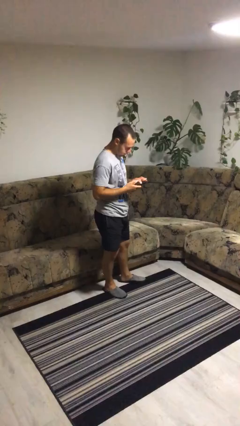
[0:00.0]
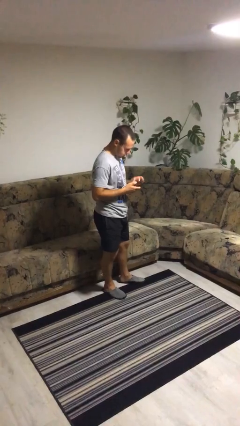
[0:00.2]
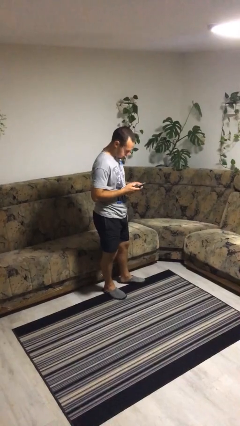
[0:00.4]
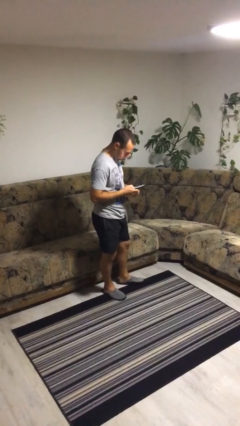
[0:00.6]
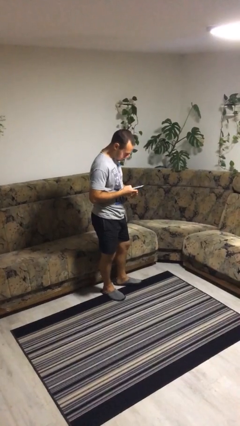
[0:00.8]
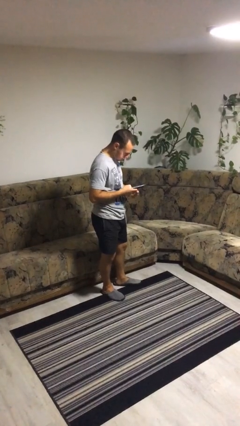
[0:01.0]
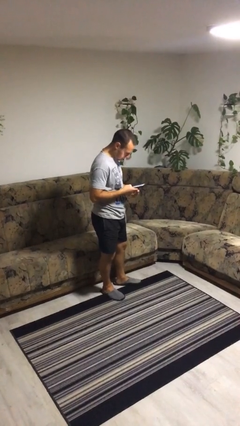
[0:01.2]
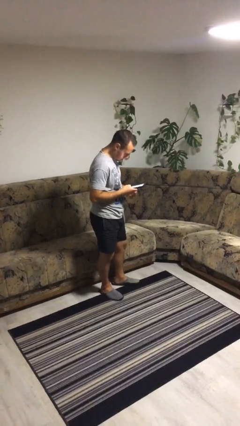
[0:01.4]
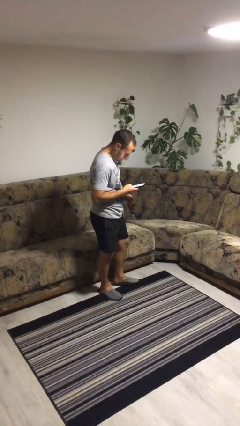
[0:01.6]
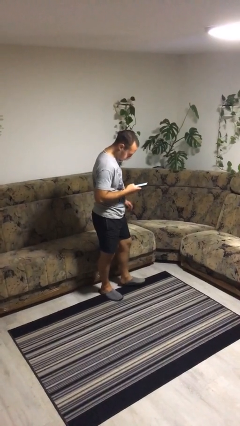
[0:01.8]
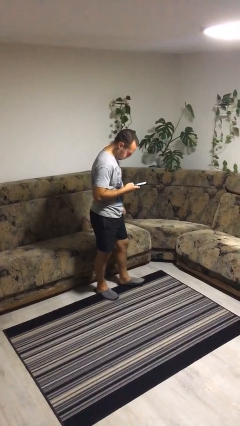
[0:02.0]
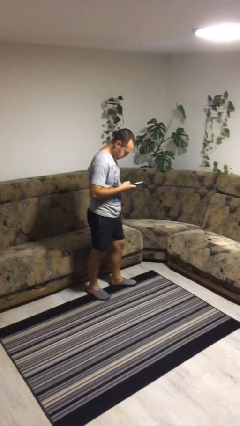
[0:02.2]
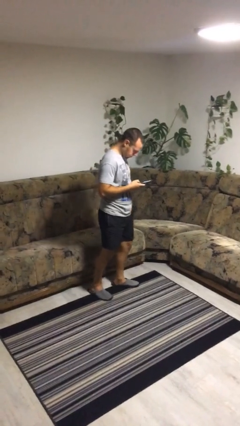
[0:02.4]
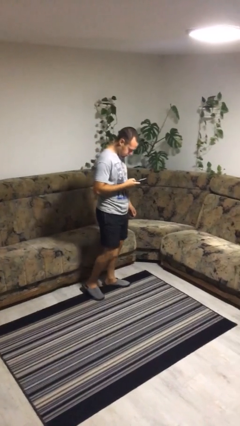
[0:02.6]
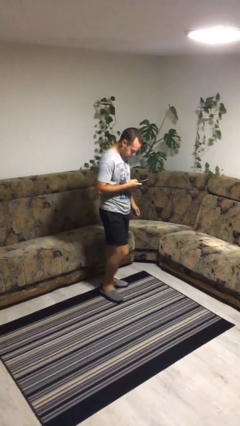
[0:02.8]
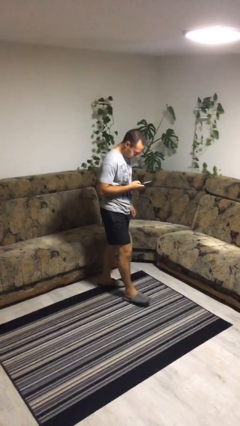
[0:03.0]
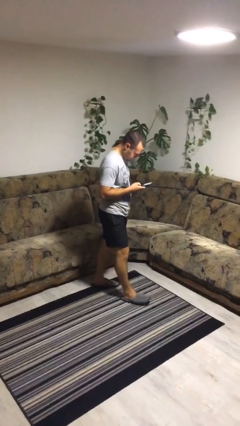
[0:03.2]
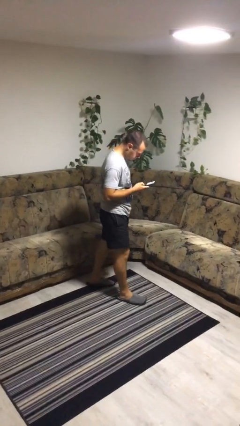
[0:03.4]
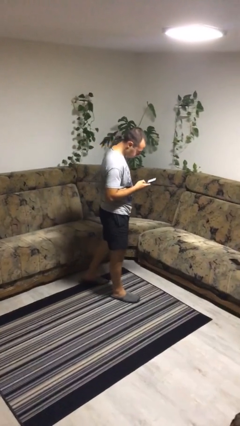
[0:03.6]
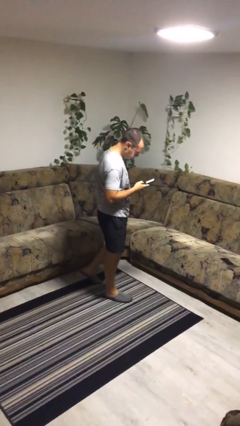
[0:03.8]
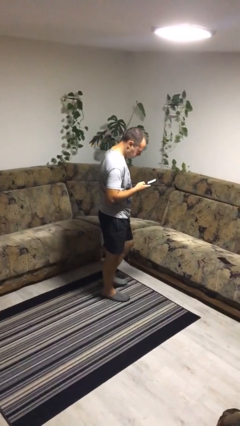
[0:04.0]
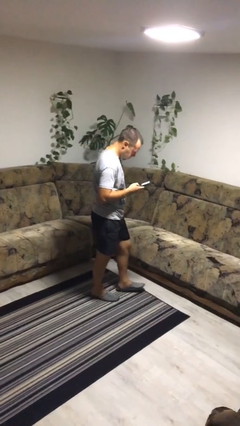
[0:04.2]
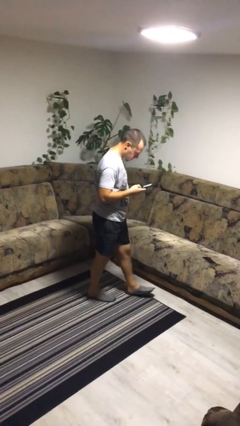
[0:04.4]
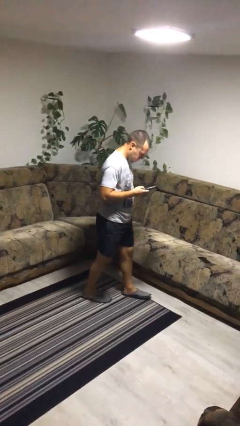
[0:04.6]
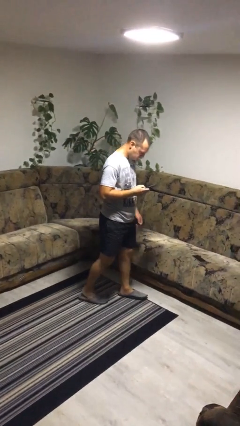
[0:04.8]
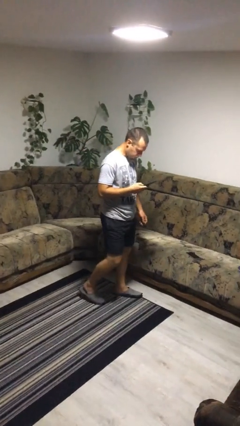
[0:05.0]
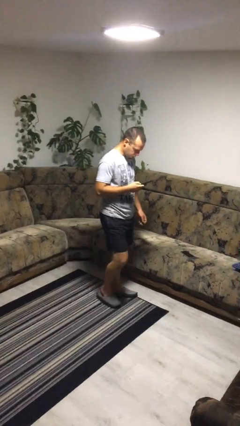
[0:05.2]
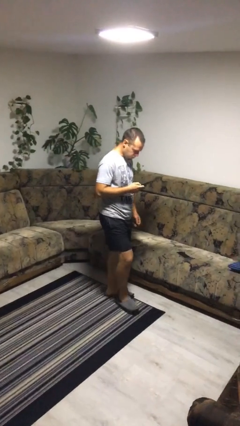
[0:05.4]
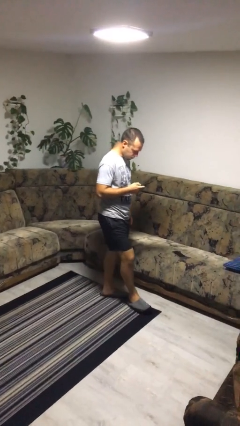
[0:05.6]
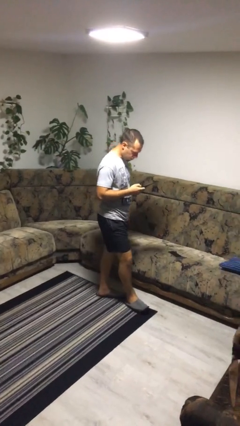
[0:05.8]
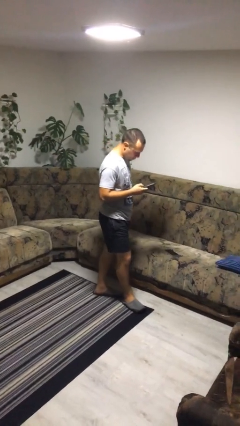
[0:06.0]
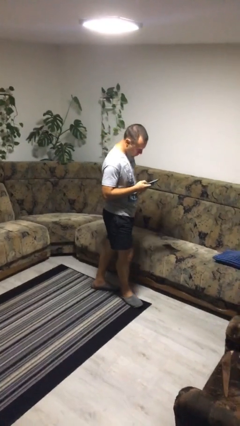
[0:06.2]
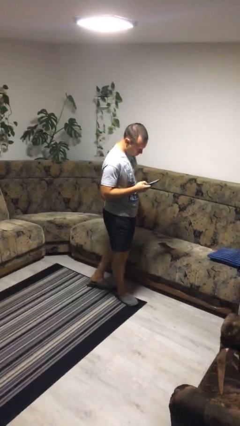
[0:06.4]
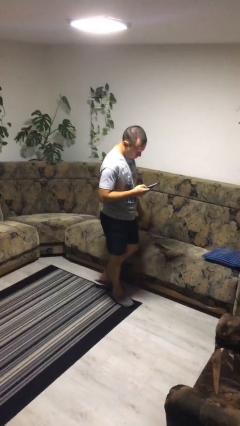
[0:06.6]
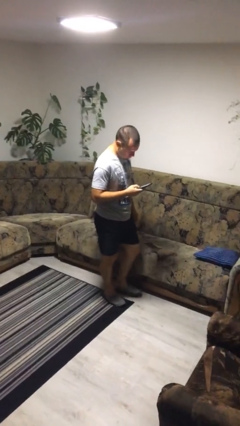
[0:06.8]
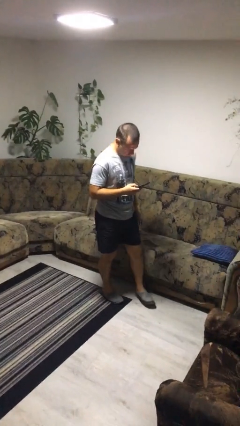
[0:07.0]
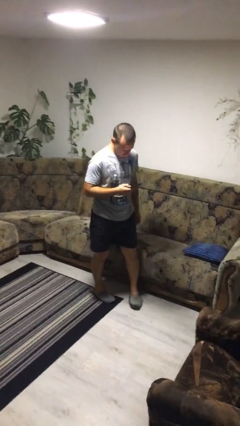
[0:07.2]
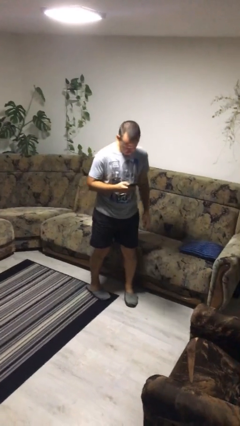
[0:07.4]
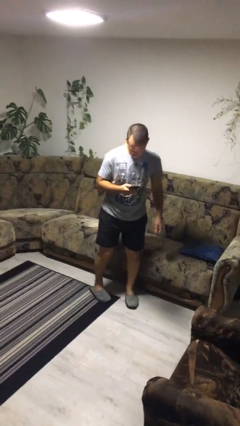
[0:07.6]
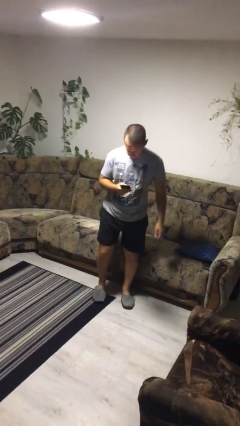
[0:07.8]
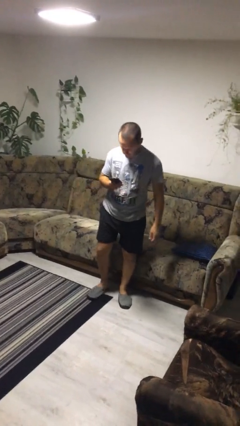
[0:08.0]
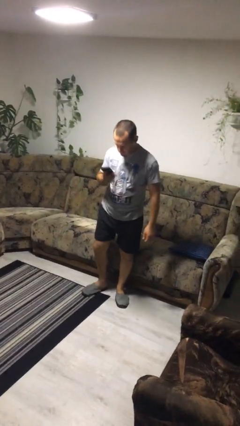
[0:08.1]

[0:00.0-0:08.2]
person texts on phone

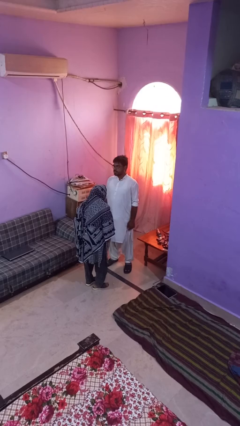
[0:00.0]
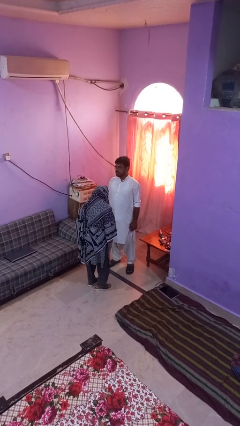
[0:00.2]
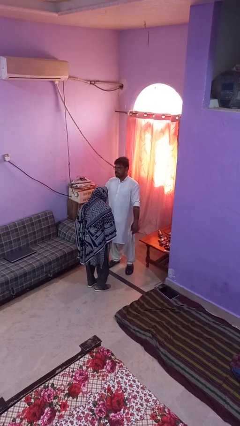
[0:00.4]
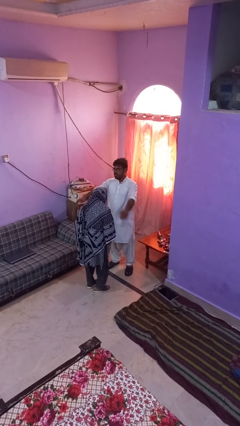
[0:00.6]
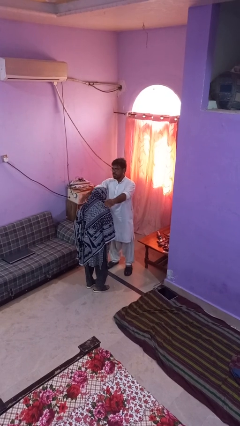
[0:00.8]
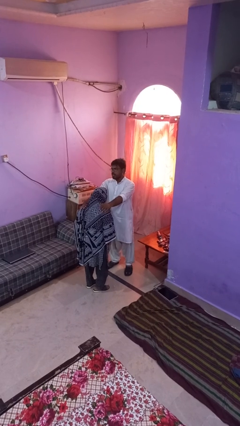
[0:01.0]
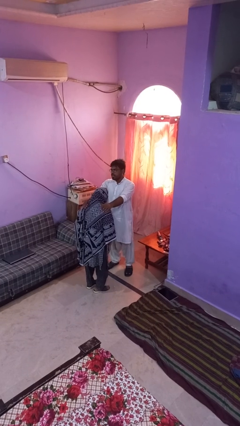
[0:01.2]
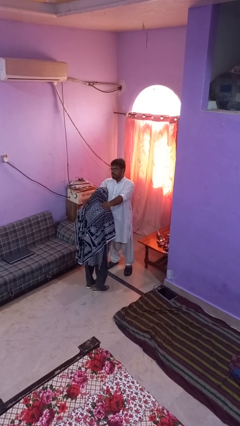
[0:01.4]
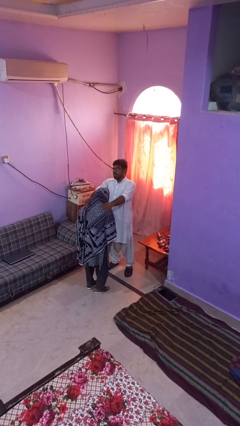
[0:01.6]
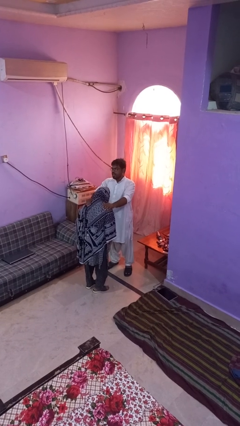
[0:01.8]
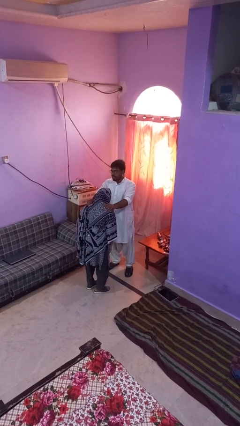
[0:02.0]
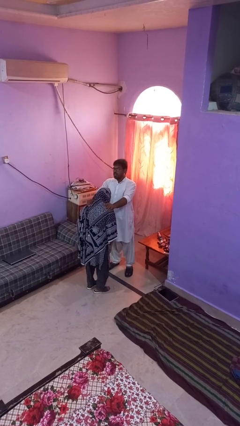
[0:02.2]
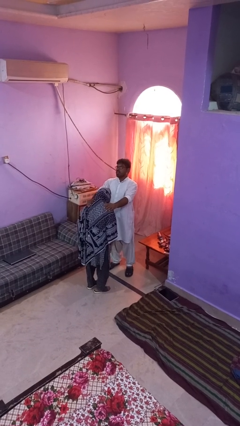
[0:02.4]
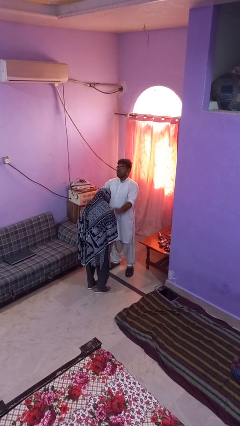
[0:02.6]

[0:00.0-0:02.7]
person pounds shoulders of person

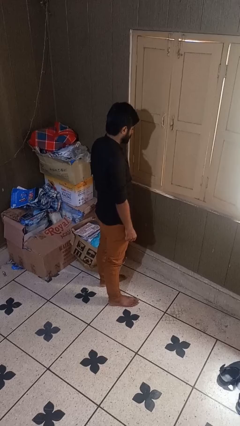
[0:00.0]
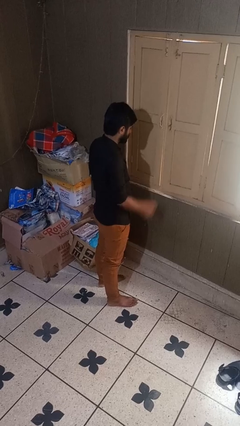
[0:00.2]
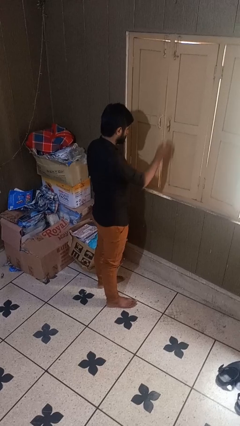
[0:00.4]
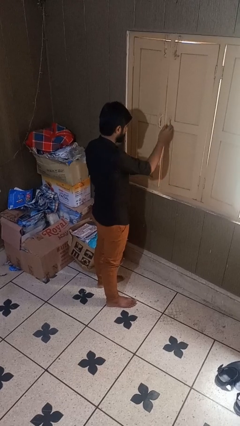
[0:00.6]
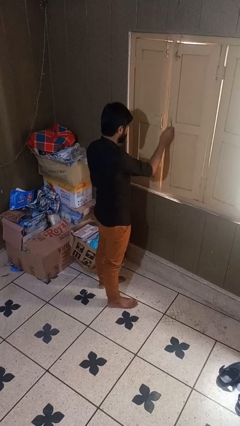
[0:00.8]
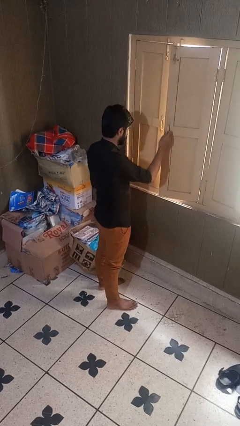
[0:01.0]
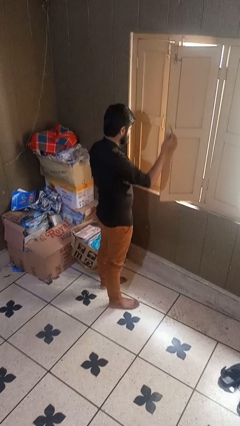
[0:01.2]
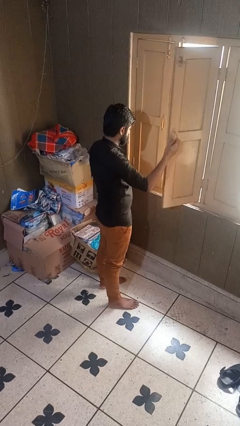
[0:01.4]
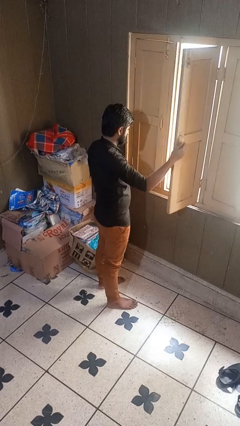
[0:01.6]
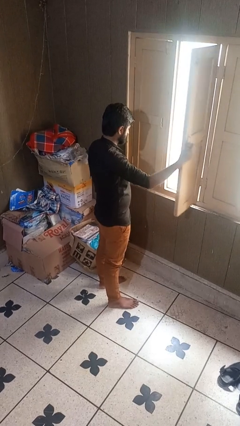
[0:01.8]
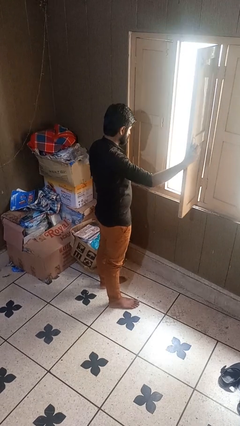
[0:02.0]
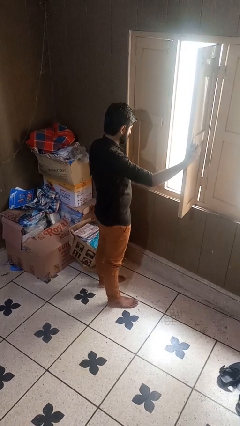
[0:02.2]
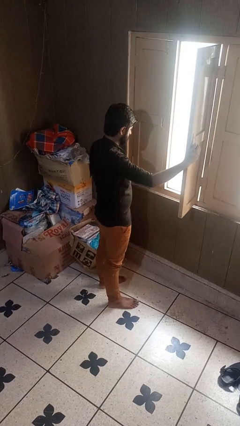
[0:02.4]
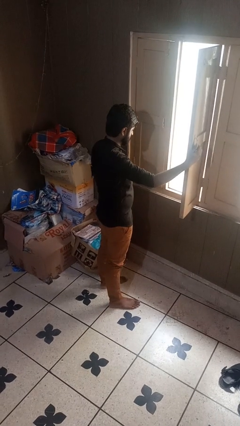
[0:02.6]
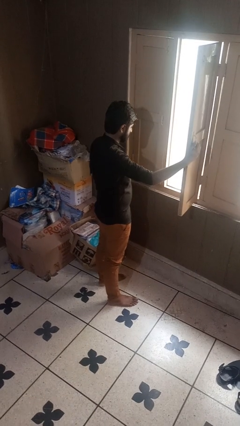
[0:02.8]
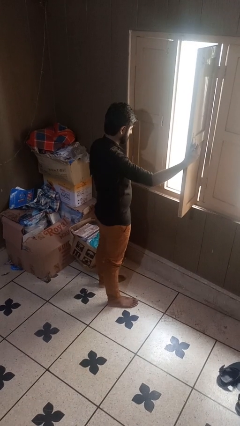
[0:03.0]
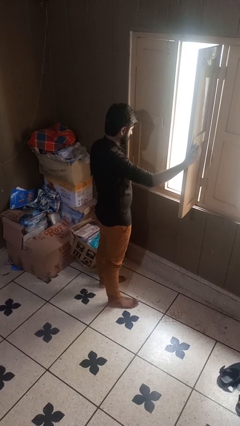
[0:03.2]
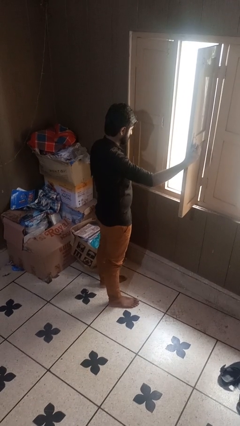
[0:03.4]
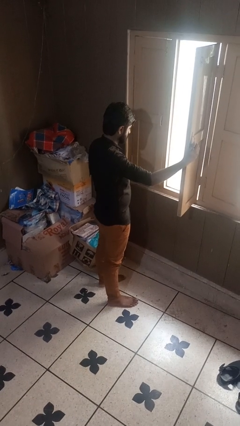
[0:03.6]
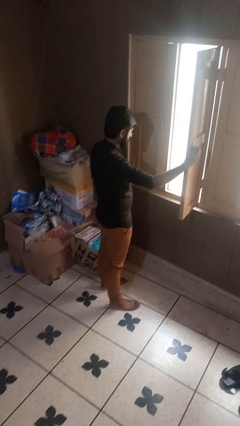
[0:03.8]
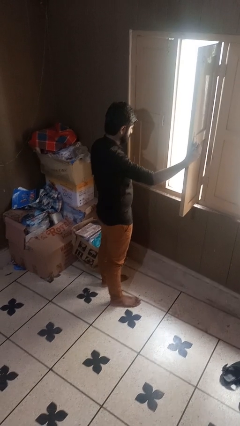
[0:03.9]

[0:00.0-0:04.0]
person opens home window

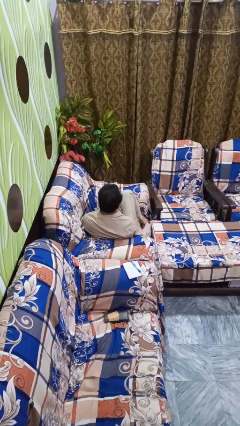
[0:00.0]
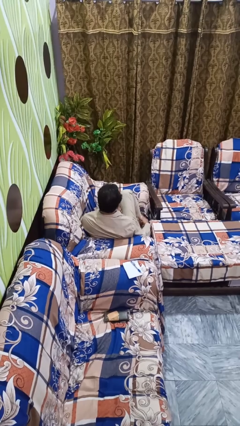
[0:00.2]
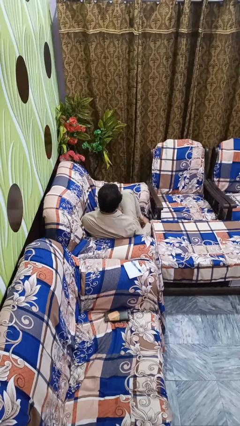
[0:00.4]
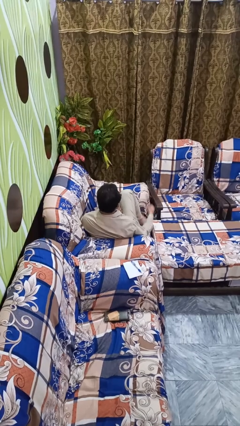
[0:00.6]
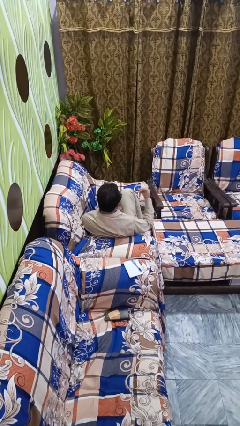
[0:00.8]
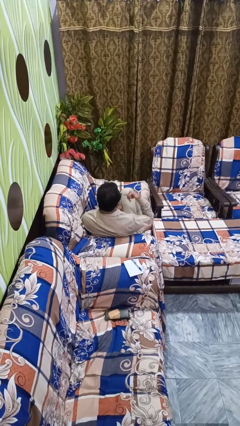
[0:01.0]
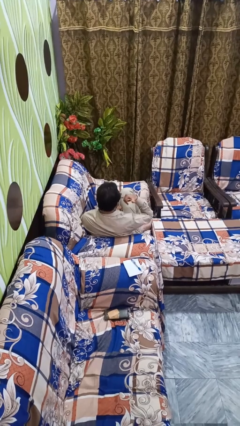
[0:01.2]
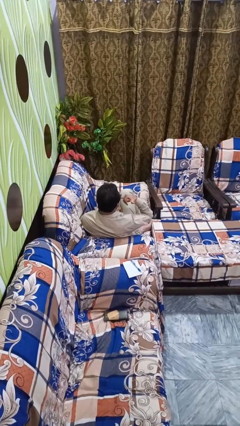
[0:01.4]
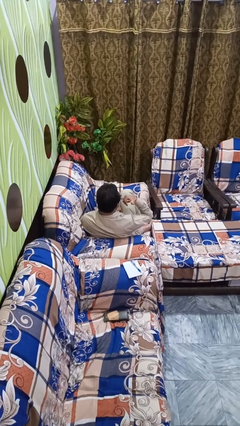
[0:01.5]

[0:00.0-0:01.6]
person gestures call me

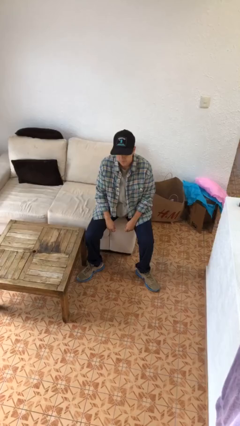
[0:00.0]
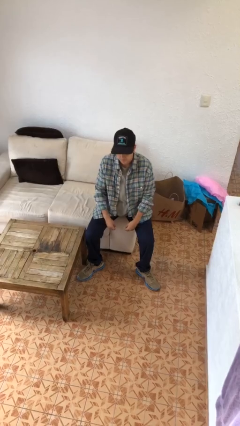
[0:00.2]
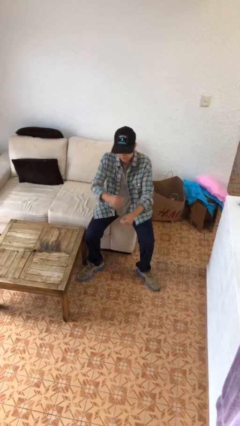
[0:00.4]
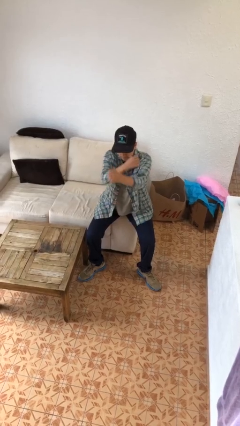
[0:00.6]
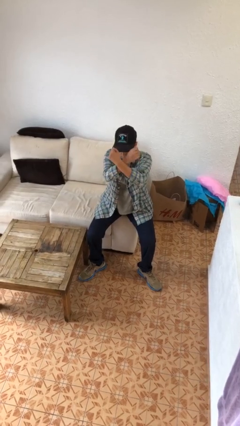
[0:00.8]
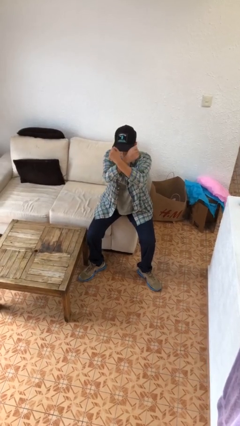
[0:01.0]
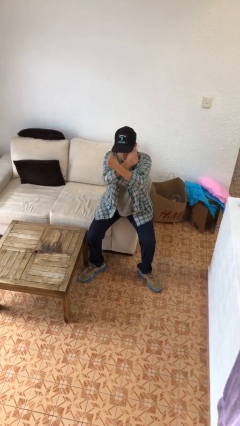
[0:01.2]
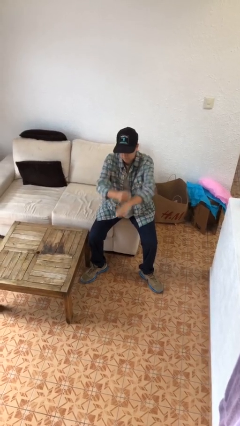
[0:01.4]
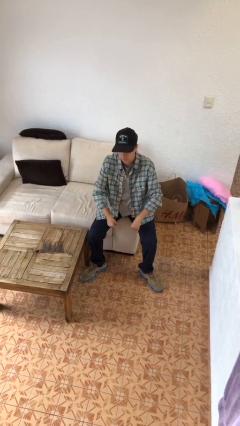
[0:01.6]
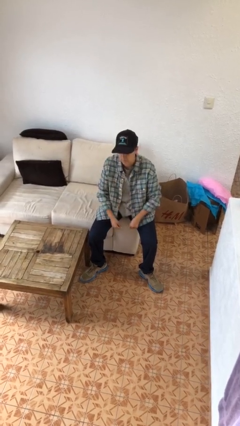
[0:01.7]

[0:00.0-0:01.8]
person gestures arms x
